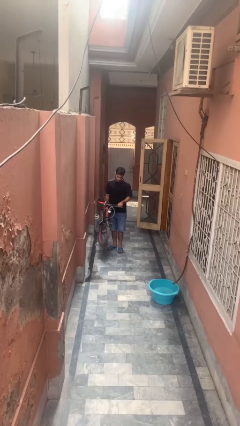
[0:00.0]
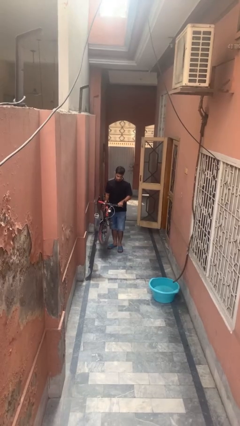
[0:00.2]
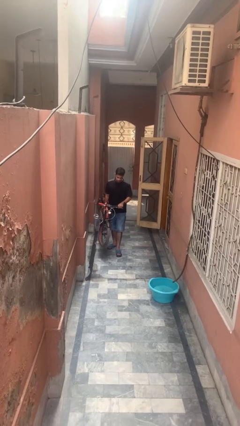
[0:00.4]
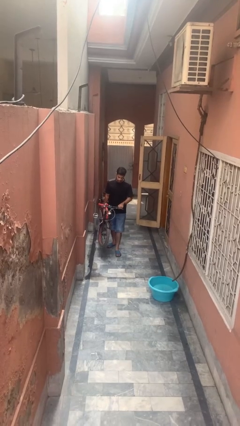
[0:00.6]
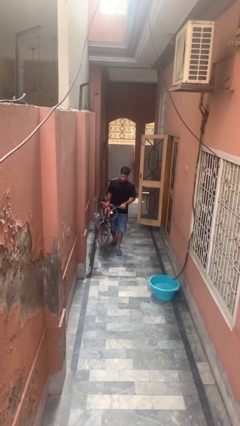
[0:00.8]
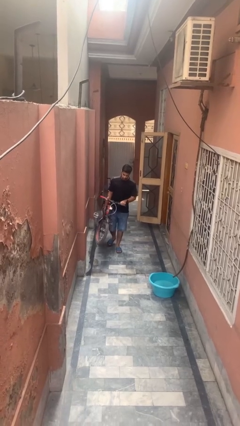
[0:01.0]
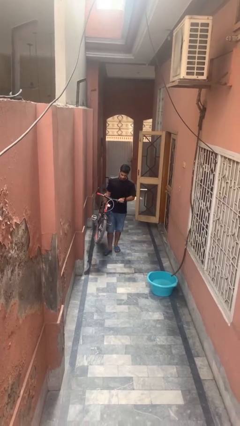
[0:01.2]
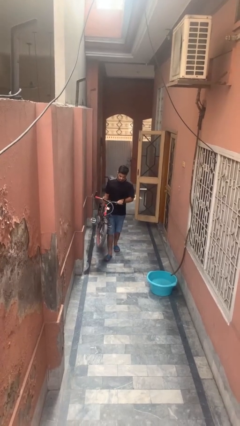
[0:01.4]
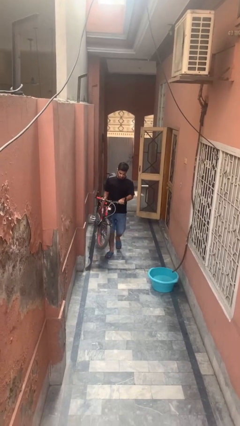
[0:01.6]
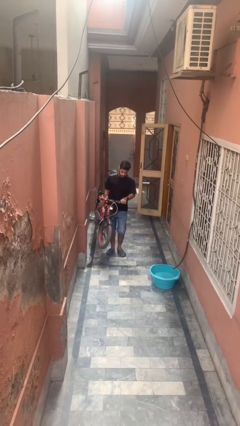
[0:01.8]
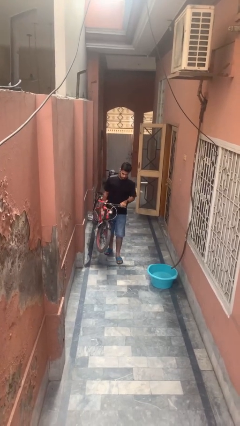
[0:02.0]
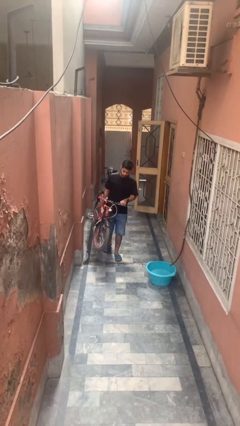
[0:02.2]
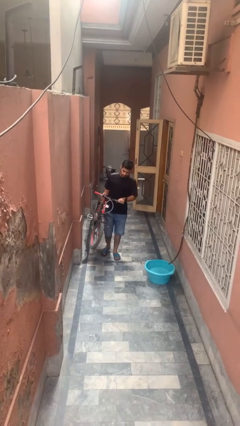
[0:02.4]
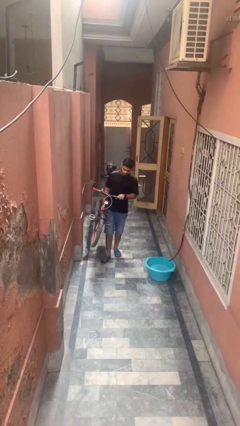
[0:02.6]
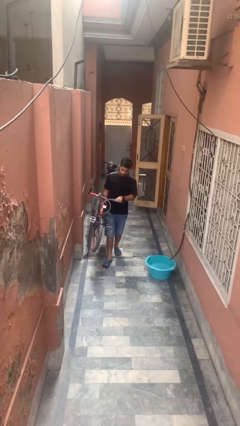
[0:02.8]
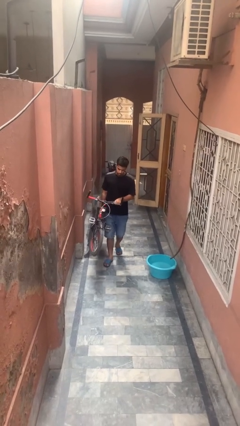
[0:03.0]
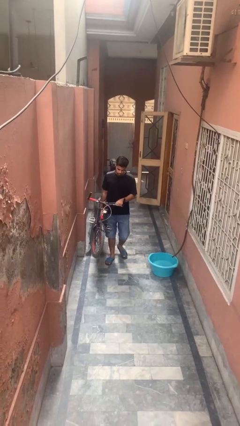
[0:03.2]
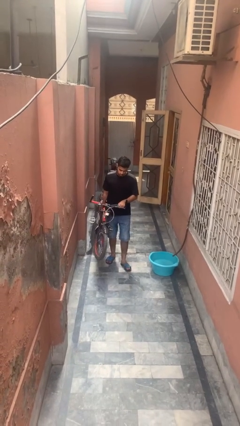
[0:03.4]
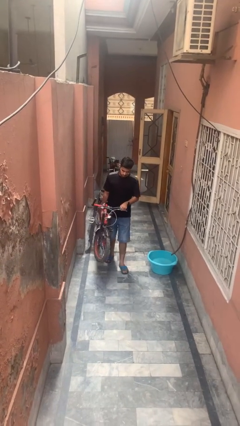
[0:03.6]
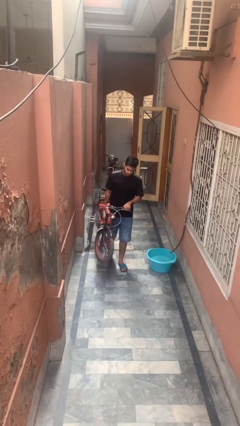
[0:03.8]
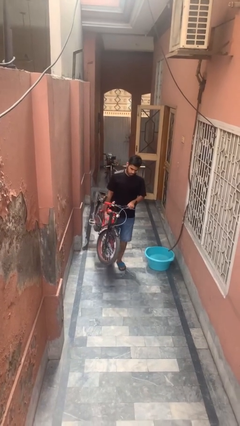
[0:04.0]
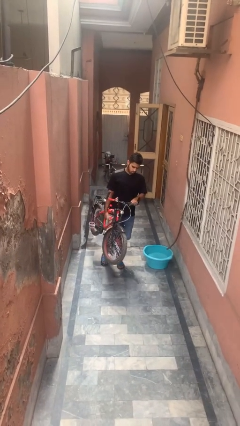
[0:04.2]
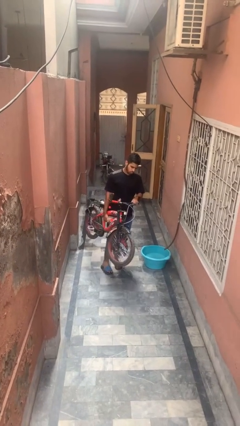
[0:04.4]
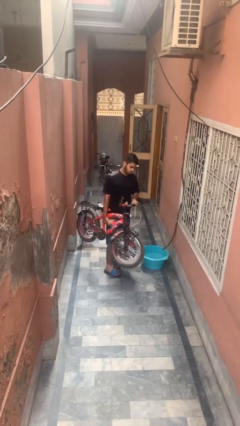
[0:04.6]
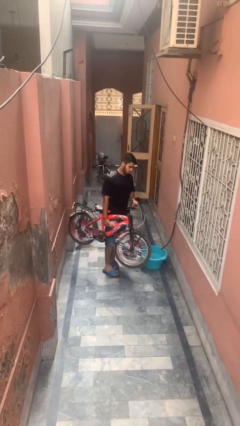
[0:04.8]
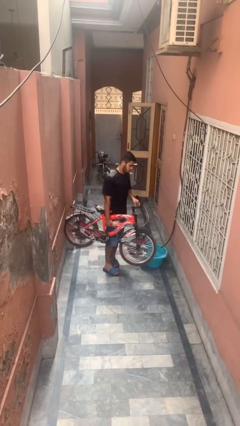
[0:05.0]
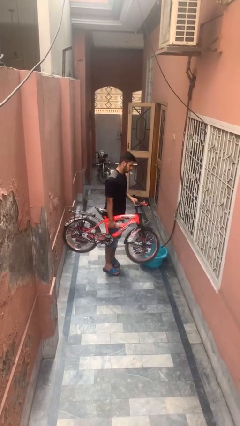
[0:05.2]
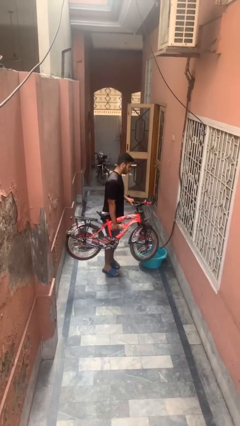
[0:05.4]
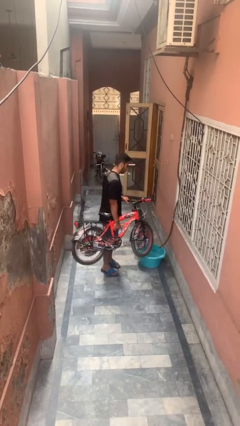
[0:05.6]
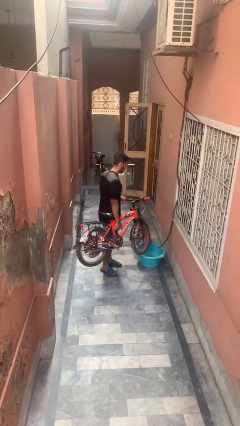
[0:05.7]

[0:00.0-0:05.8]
person carries bicycle

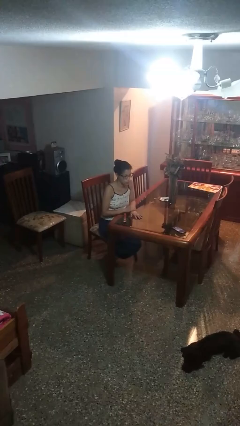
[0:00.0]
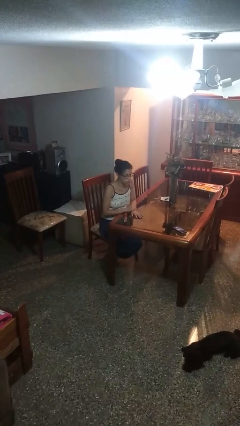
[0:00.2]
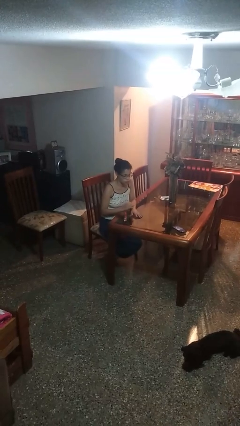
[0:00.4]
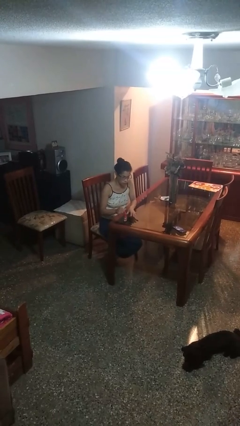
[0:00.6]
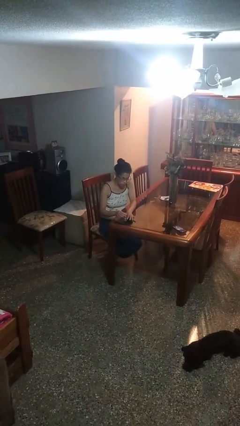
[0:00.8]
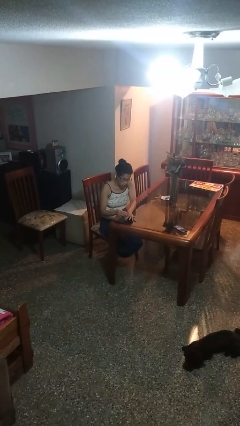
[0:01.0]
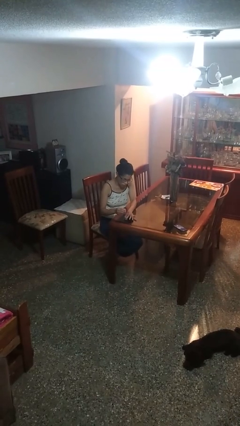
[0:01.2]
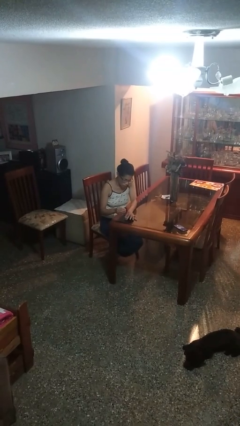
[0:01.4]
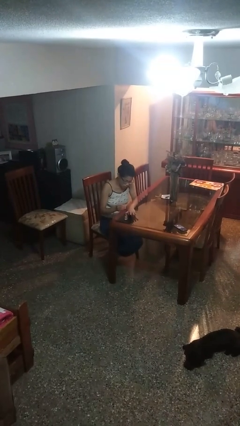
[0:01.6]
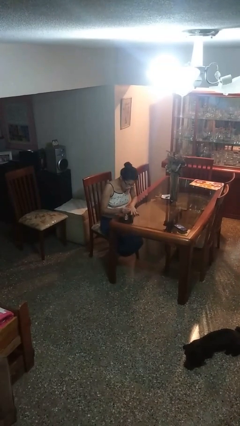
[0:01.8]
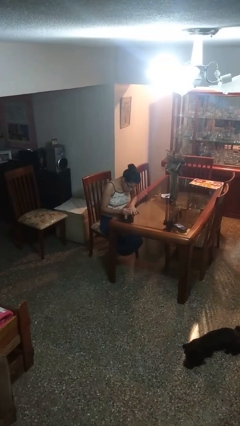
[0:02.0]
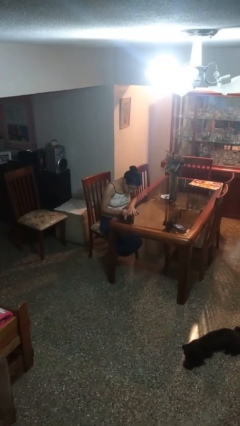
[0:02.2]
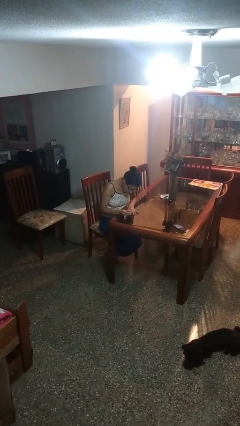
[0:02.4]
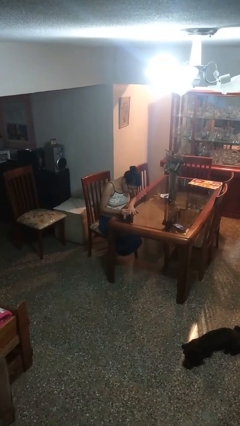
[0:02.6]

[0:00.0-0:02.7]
person paints fingernails

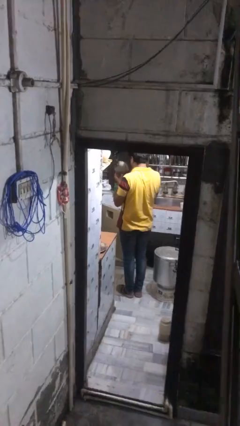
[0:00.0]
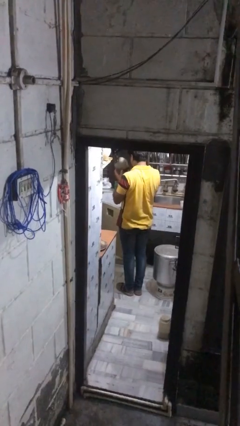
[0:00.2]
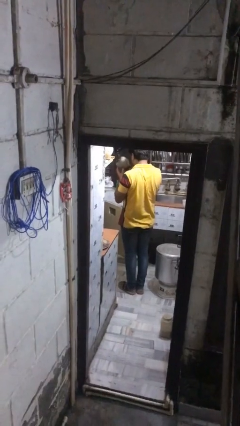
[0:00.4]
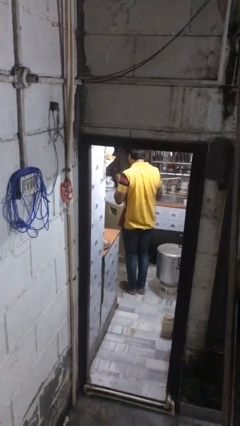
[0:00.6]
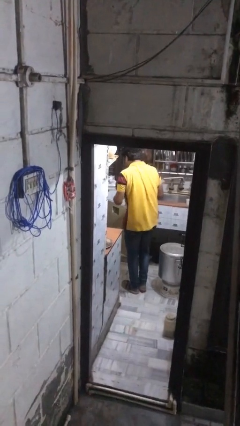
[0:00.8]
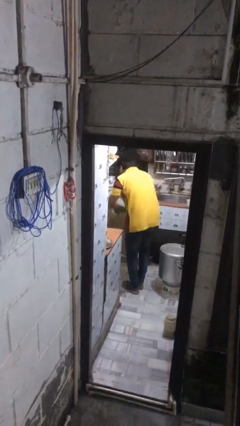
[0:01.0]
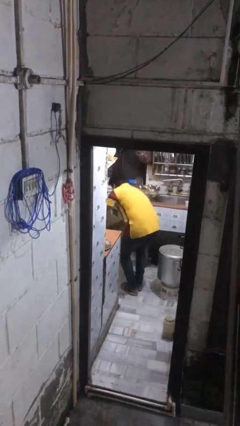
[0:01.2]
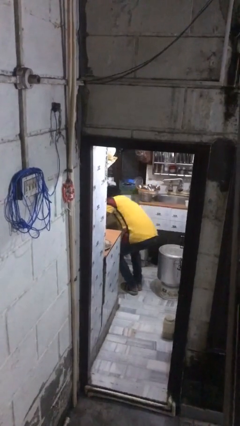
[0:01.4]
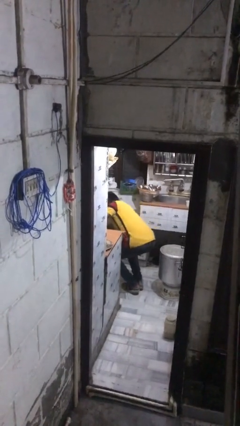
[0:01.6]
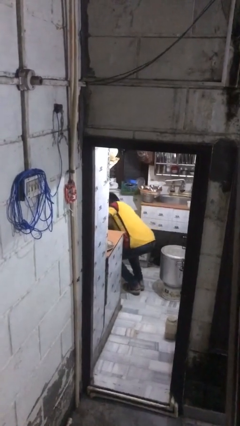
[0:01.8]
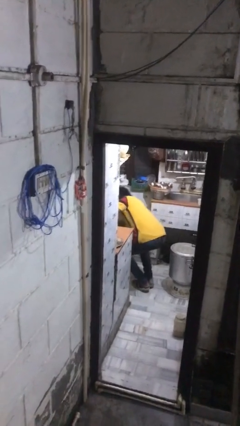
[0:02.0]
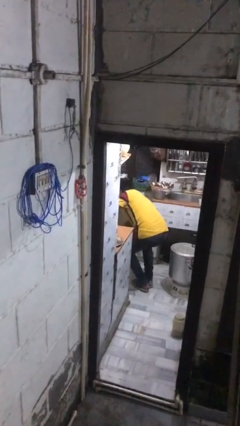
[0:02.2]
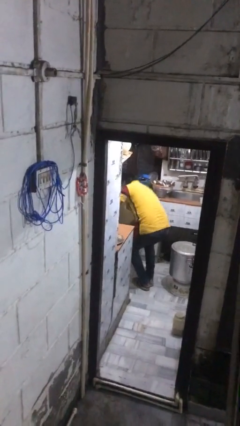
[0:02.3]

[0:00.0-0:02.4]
person puts object into kitchen drawer

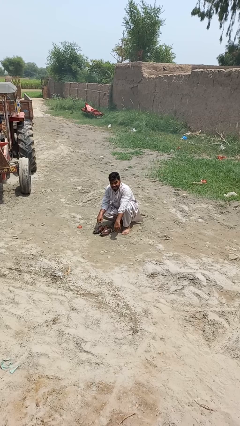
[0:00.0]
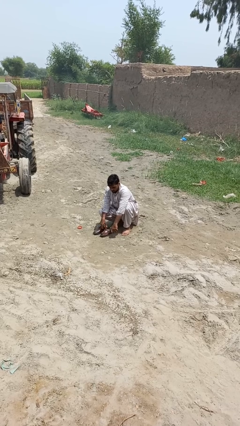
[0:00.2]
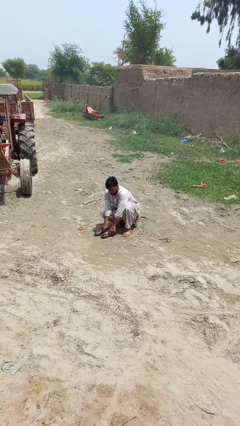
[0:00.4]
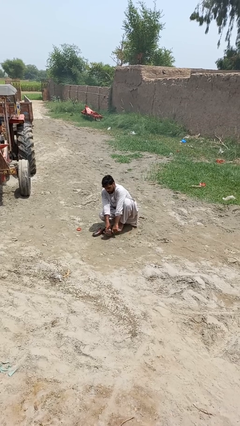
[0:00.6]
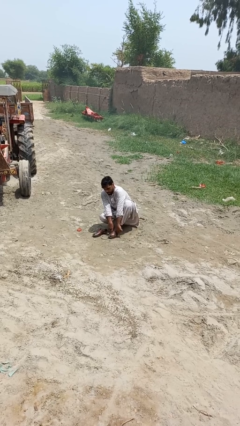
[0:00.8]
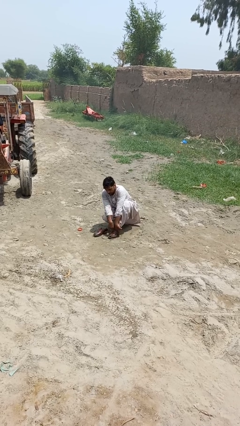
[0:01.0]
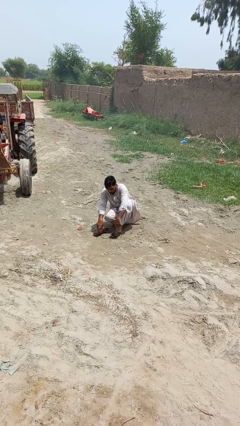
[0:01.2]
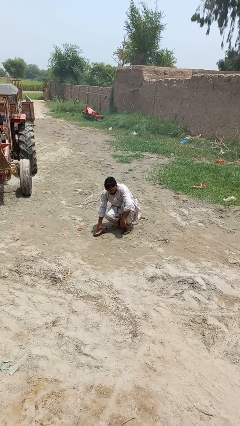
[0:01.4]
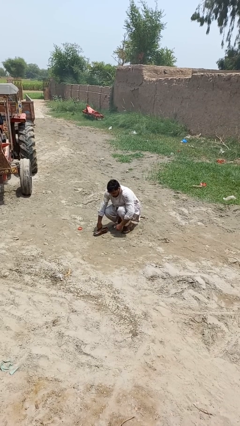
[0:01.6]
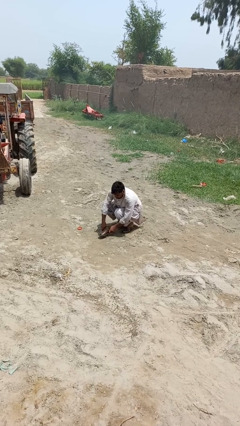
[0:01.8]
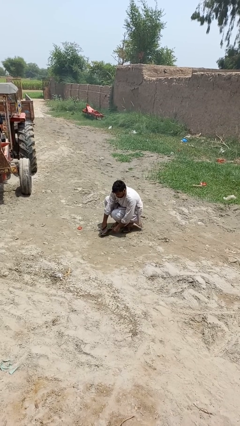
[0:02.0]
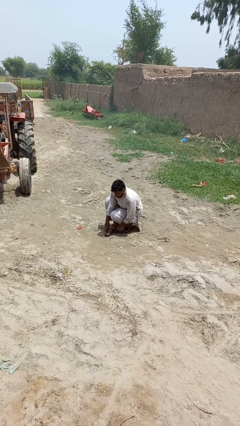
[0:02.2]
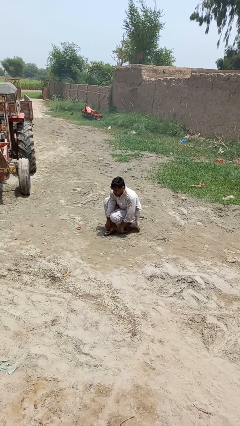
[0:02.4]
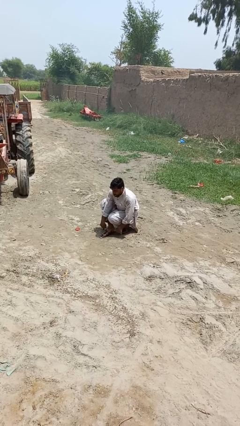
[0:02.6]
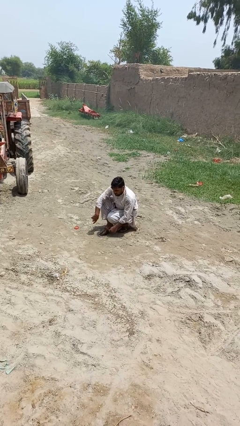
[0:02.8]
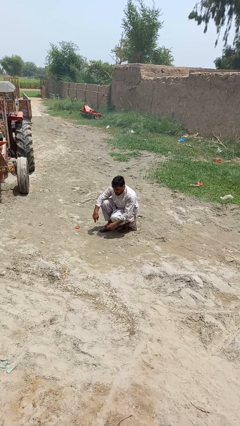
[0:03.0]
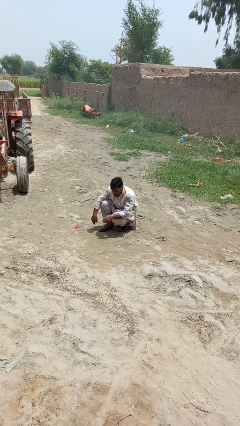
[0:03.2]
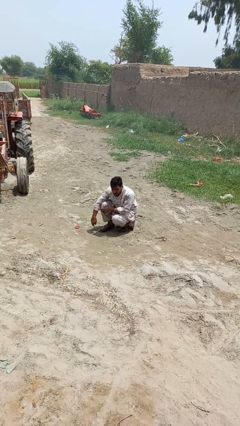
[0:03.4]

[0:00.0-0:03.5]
person puts on shoes

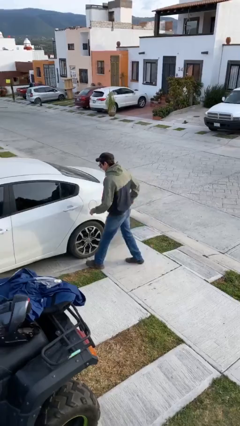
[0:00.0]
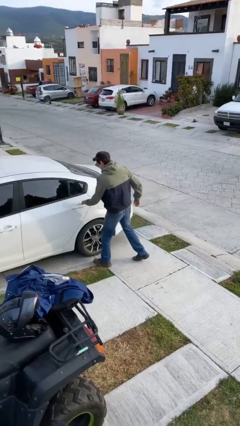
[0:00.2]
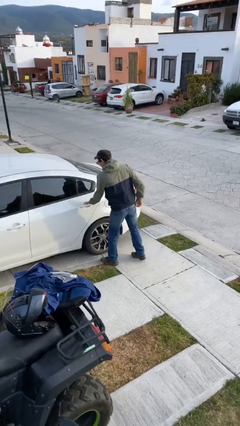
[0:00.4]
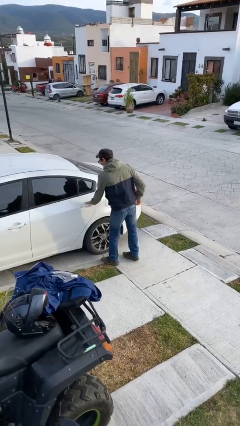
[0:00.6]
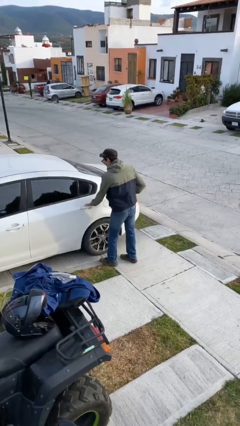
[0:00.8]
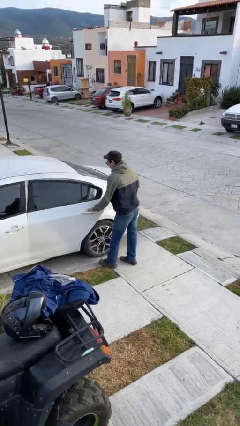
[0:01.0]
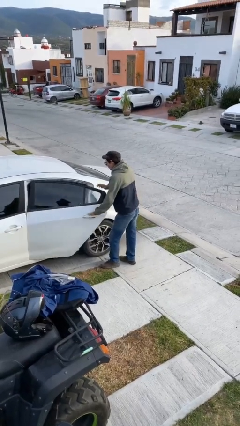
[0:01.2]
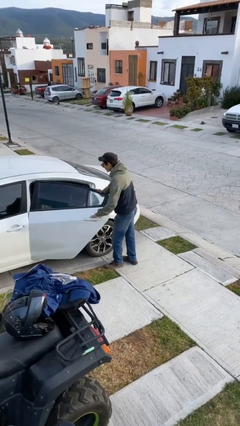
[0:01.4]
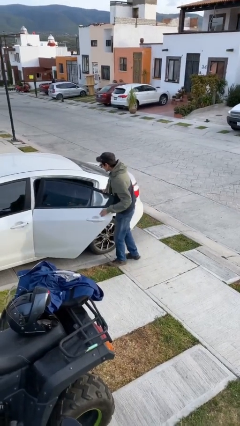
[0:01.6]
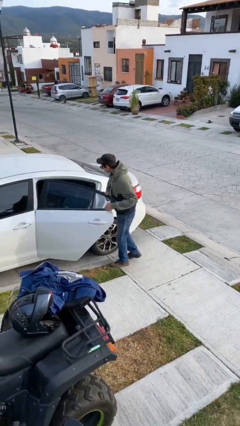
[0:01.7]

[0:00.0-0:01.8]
person opens car door

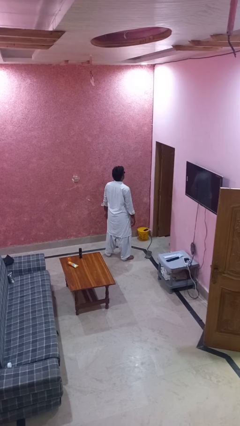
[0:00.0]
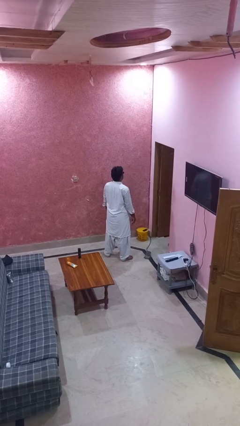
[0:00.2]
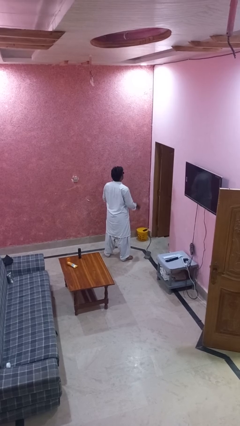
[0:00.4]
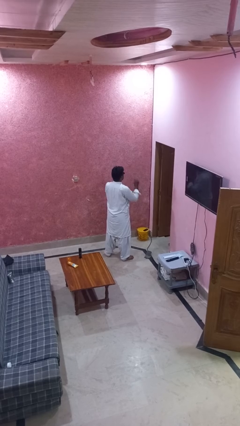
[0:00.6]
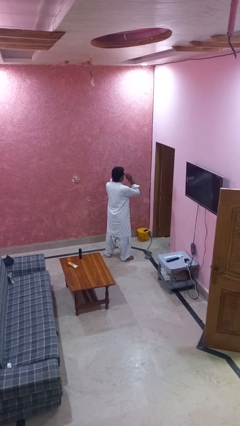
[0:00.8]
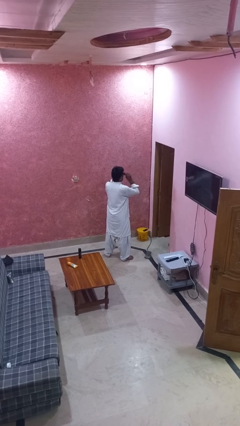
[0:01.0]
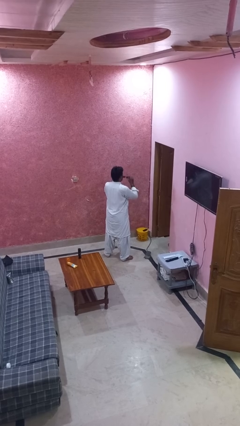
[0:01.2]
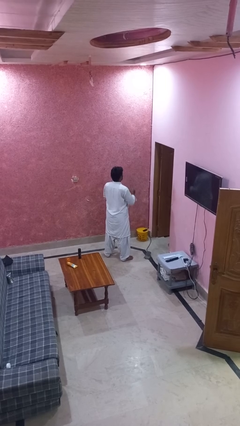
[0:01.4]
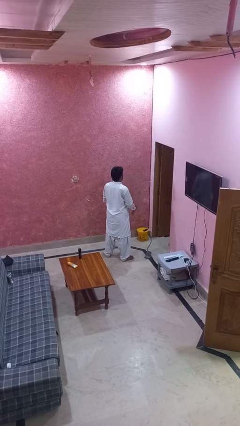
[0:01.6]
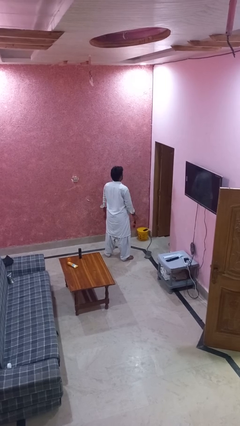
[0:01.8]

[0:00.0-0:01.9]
person takes off sunglasses
